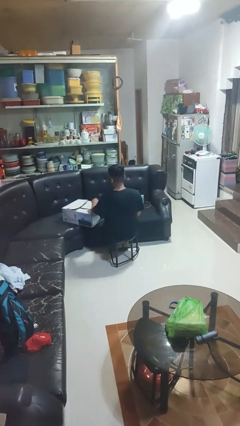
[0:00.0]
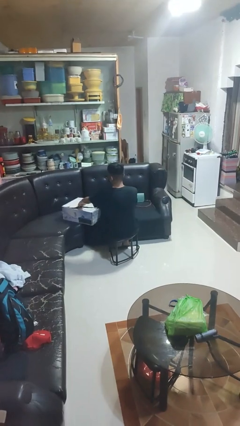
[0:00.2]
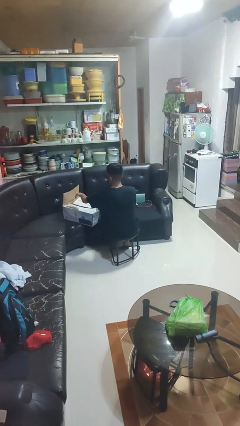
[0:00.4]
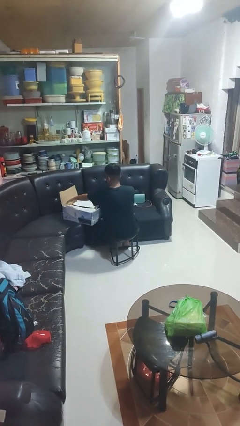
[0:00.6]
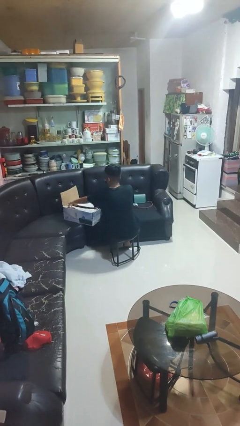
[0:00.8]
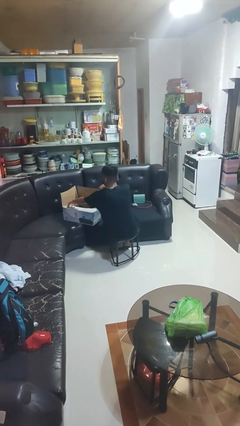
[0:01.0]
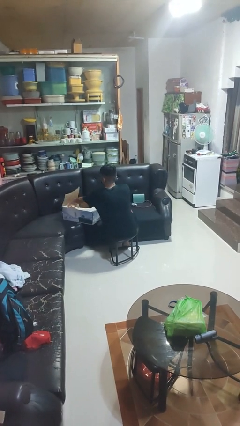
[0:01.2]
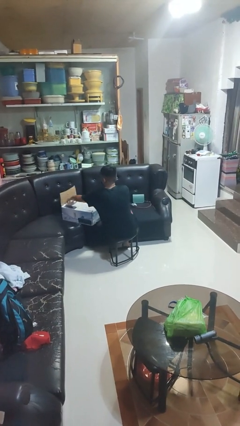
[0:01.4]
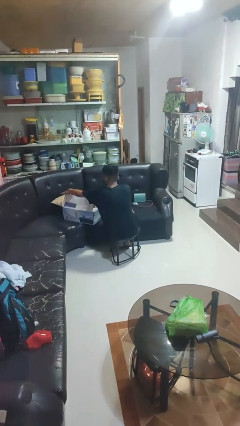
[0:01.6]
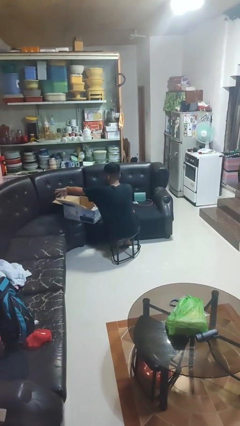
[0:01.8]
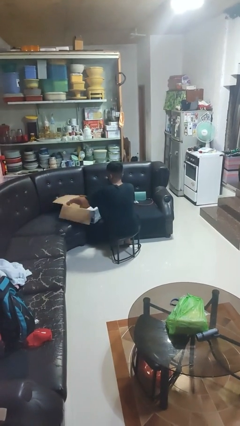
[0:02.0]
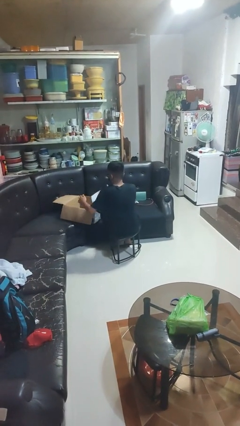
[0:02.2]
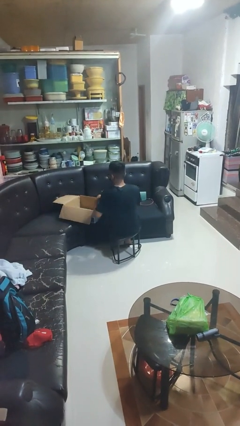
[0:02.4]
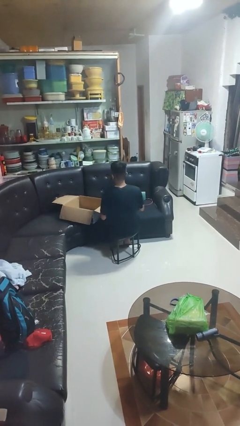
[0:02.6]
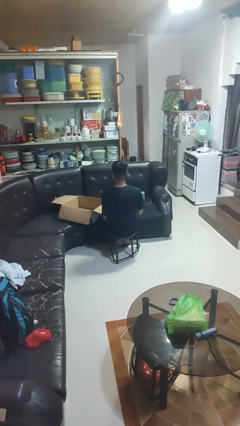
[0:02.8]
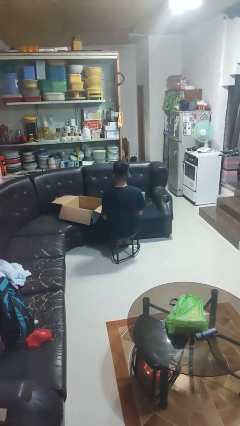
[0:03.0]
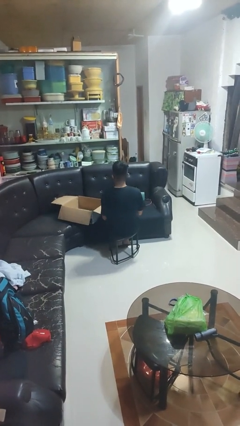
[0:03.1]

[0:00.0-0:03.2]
person opens box

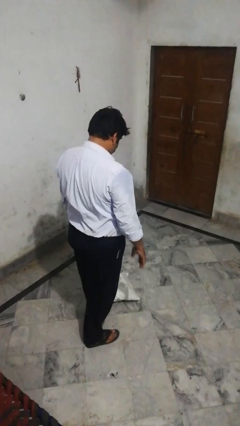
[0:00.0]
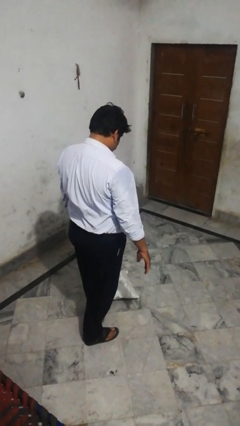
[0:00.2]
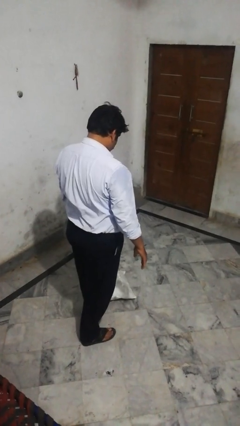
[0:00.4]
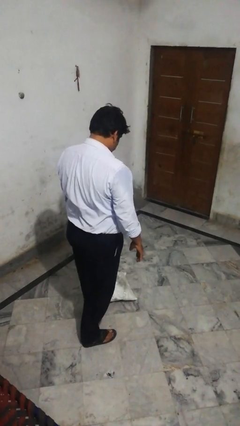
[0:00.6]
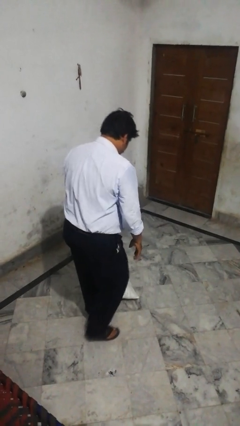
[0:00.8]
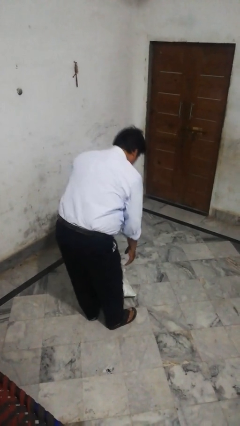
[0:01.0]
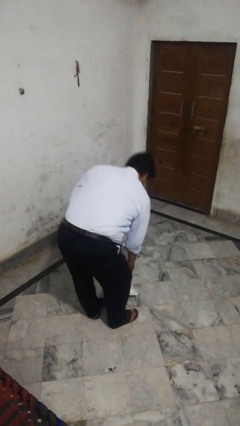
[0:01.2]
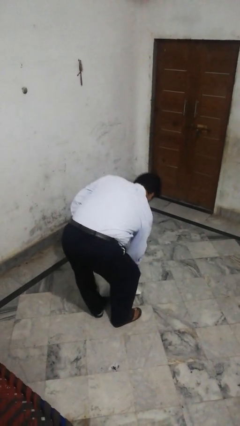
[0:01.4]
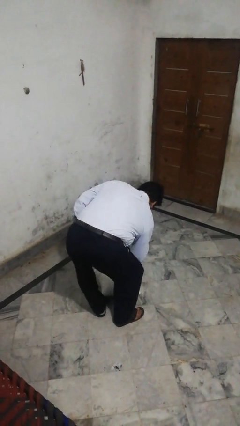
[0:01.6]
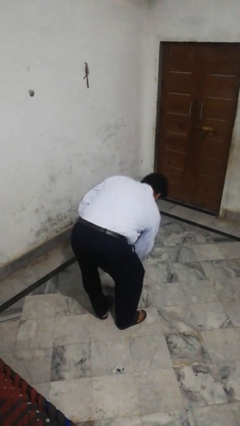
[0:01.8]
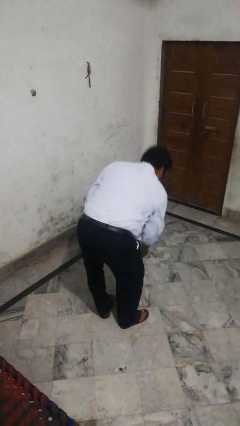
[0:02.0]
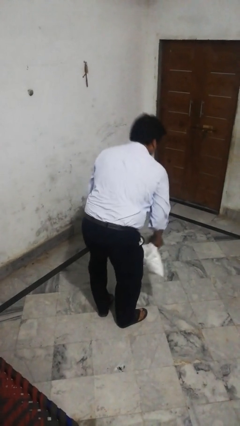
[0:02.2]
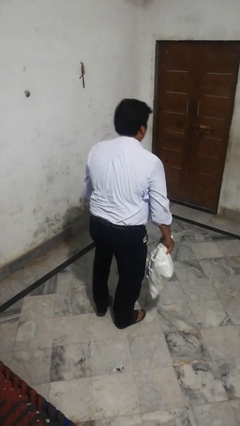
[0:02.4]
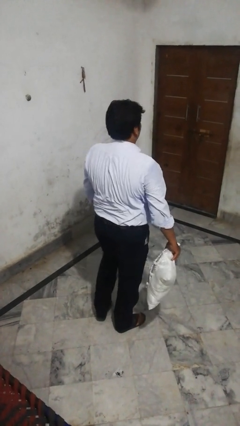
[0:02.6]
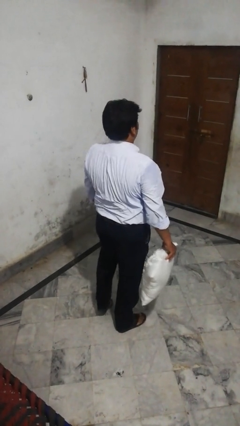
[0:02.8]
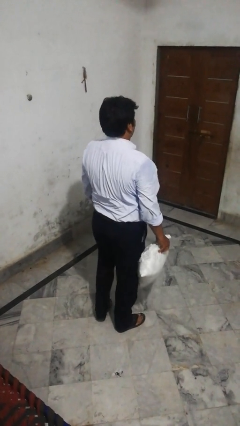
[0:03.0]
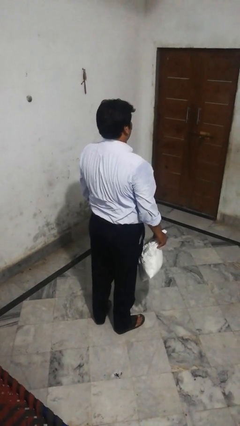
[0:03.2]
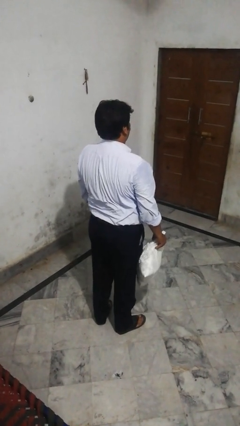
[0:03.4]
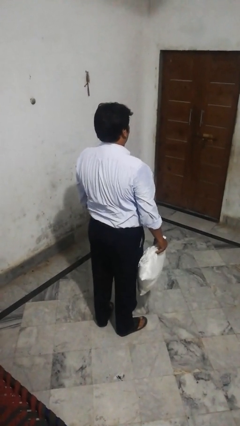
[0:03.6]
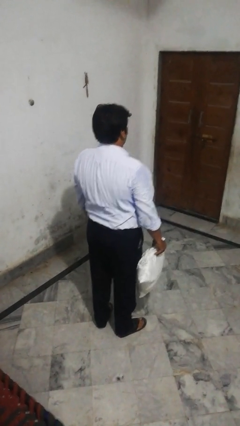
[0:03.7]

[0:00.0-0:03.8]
person picks up object from floor

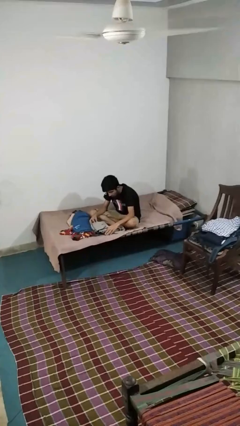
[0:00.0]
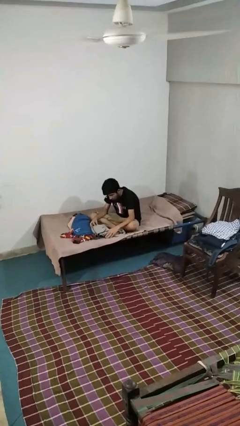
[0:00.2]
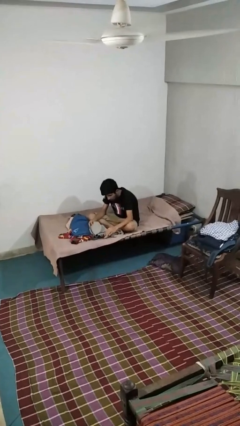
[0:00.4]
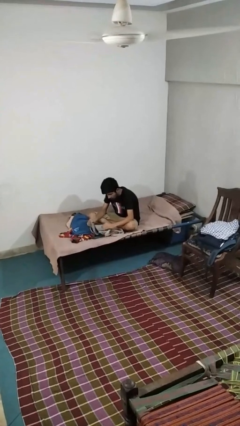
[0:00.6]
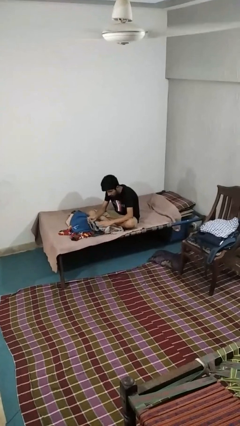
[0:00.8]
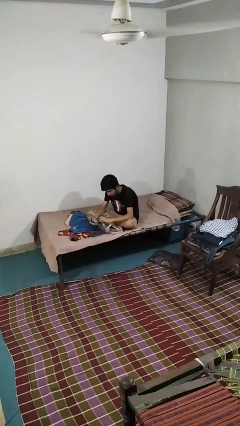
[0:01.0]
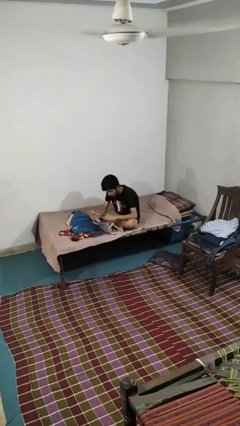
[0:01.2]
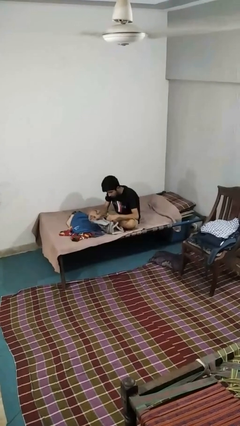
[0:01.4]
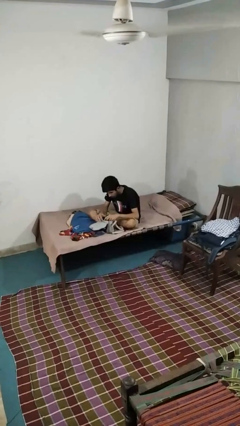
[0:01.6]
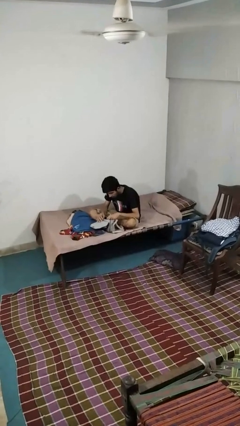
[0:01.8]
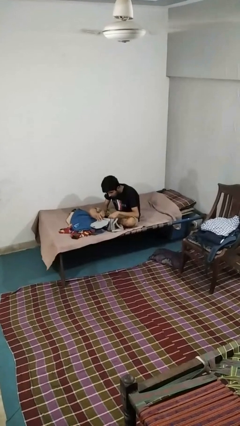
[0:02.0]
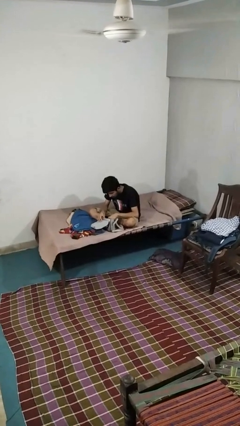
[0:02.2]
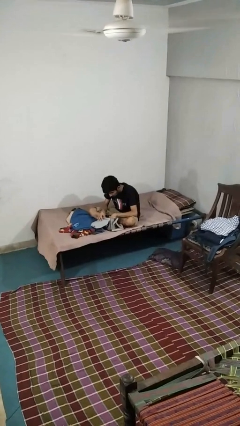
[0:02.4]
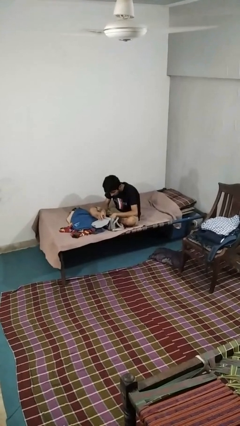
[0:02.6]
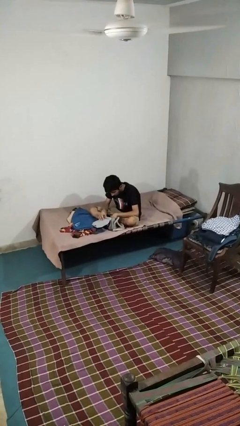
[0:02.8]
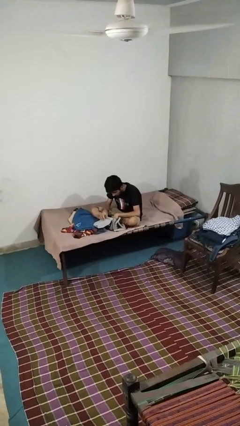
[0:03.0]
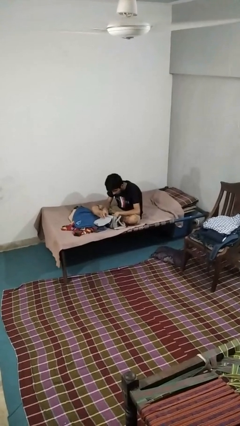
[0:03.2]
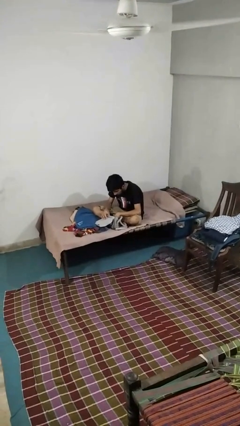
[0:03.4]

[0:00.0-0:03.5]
person searches in purse

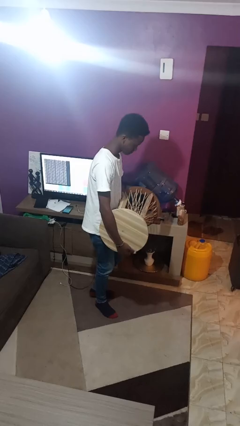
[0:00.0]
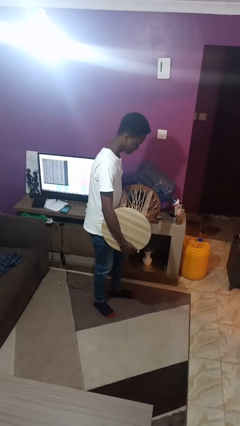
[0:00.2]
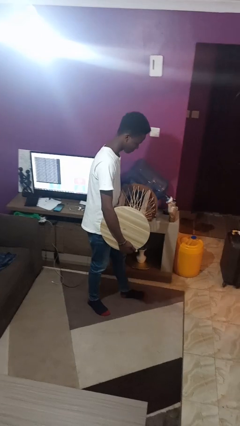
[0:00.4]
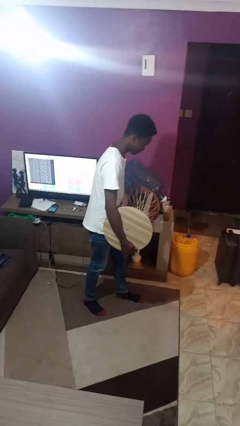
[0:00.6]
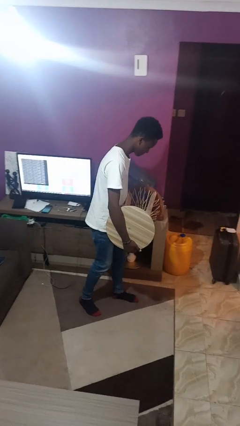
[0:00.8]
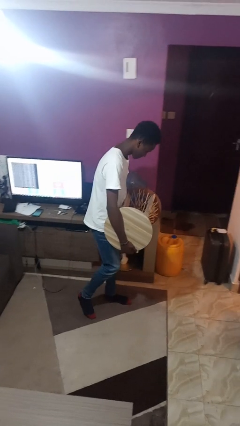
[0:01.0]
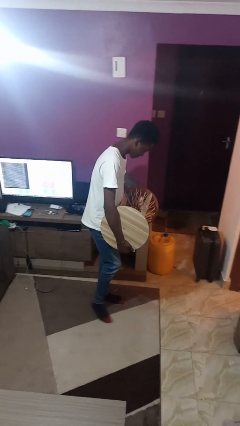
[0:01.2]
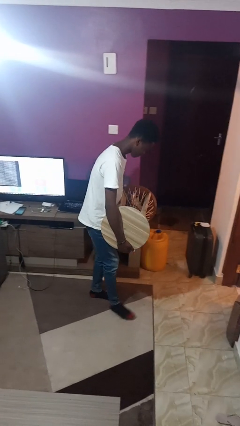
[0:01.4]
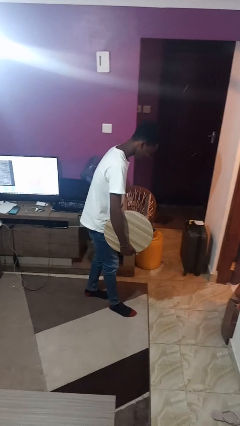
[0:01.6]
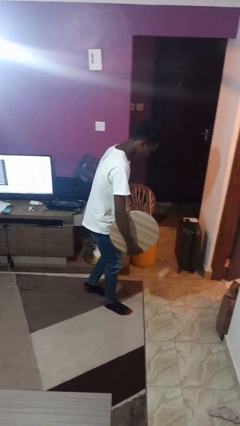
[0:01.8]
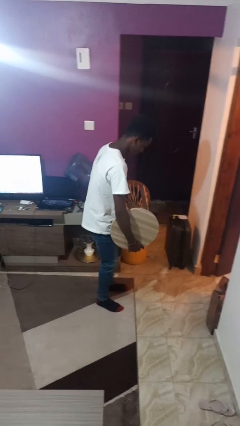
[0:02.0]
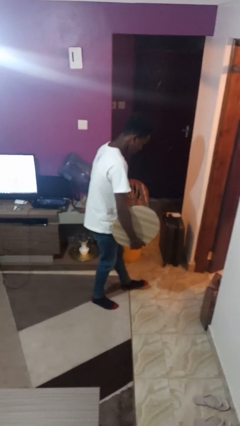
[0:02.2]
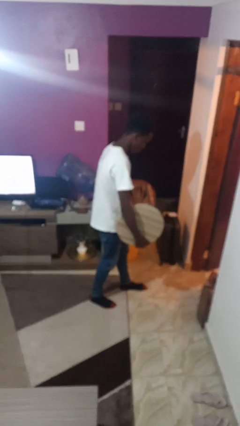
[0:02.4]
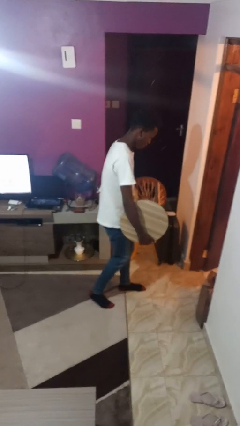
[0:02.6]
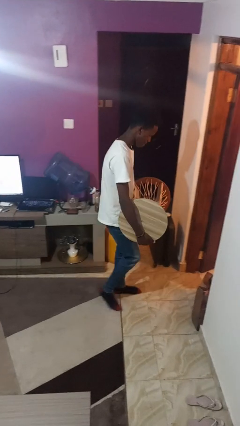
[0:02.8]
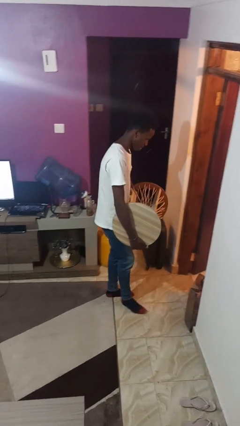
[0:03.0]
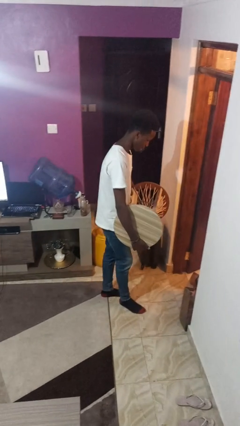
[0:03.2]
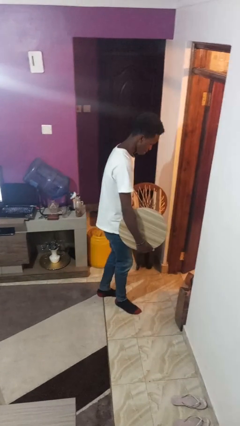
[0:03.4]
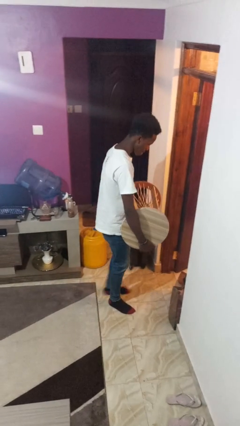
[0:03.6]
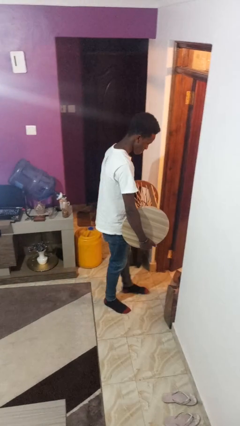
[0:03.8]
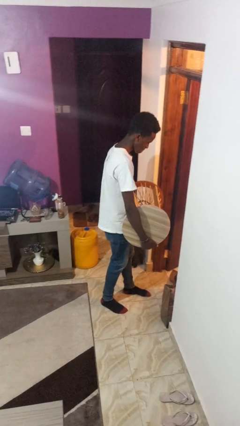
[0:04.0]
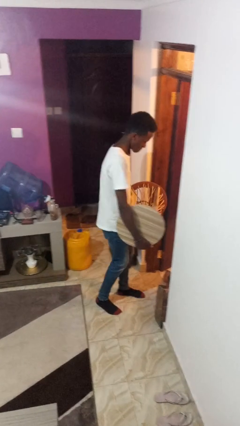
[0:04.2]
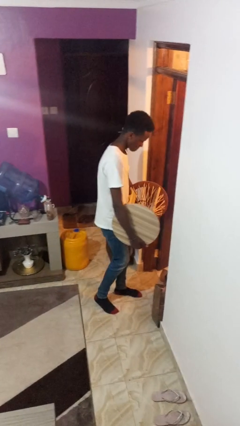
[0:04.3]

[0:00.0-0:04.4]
person carries furniture

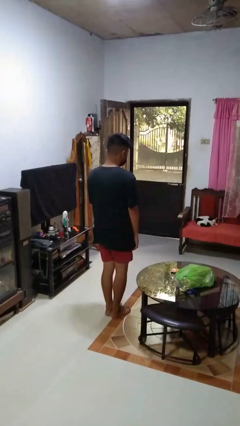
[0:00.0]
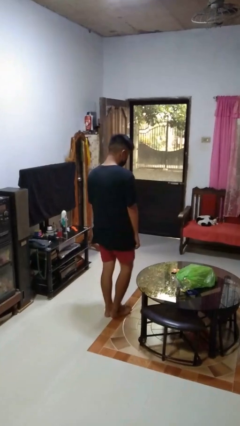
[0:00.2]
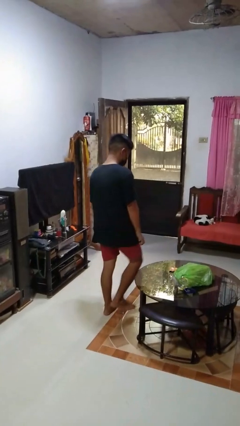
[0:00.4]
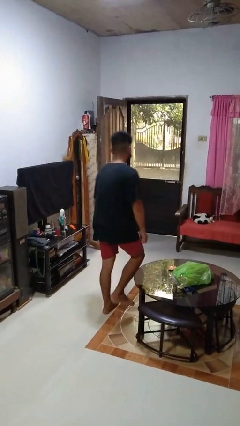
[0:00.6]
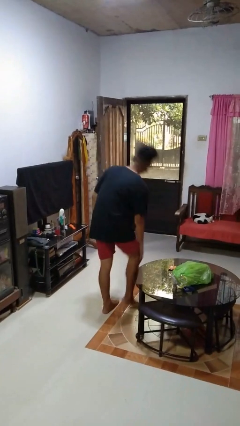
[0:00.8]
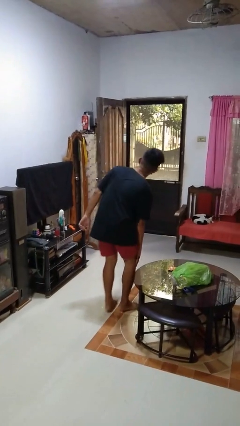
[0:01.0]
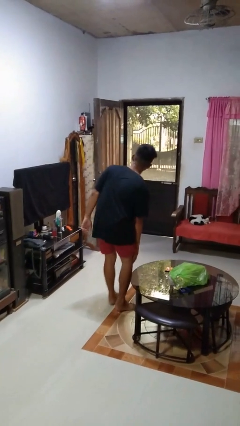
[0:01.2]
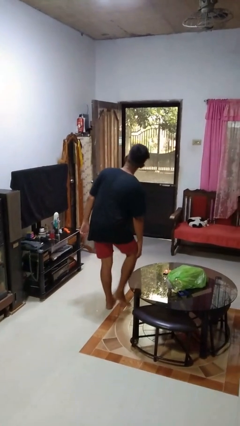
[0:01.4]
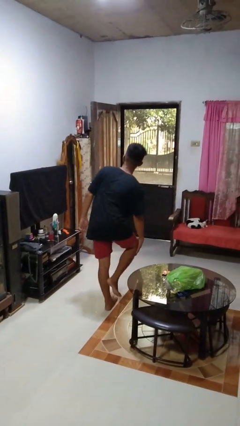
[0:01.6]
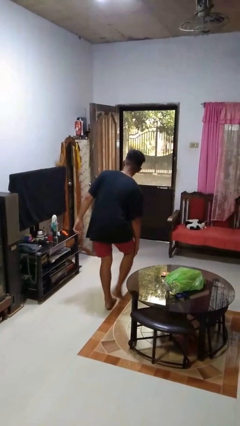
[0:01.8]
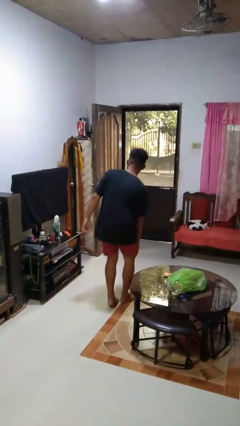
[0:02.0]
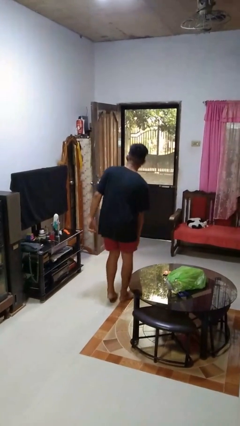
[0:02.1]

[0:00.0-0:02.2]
person bumps into table

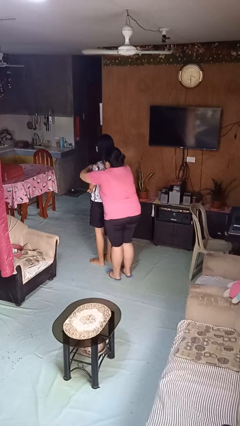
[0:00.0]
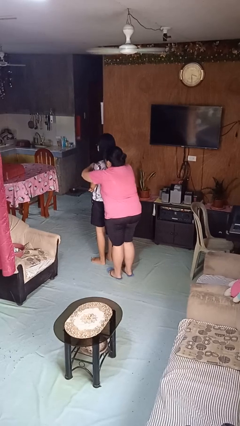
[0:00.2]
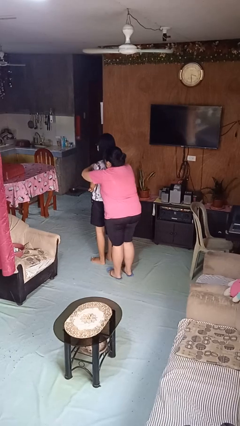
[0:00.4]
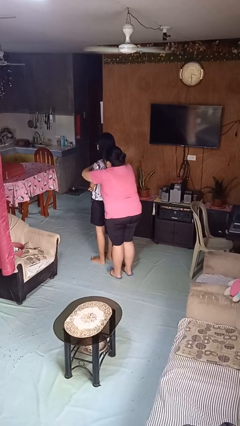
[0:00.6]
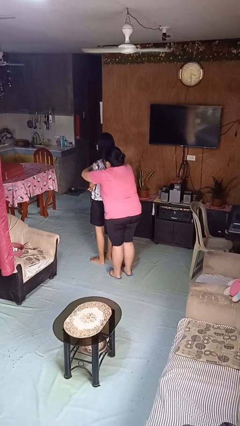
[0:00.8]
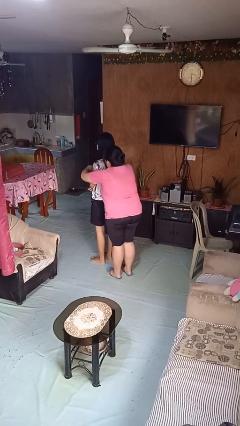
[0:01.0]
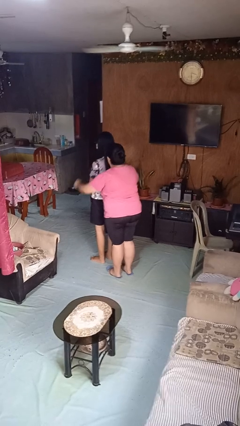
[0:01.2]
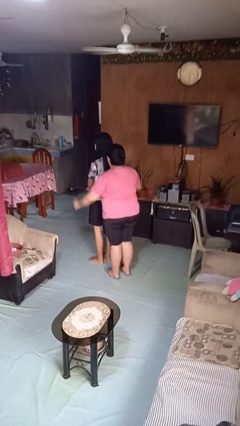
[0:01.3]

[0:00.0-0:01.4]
person hugs person from behind
